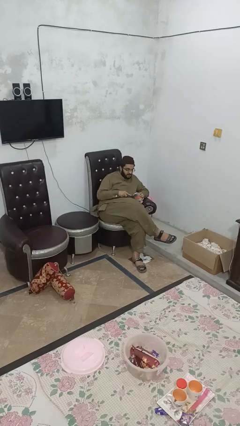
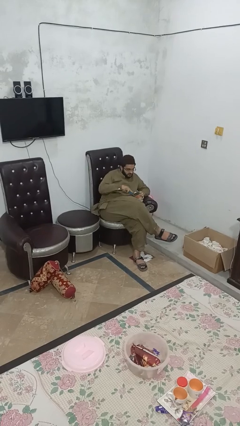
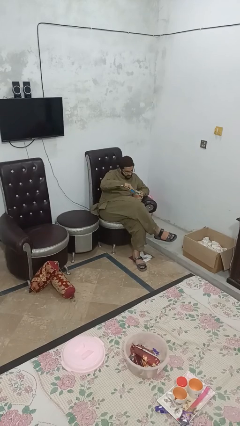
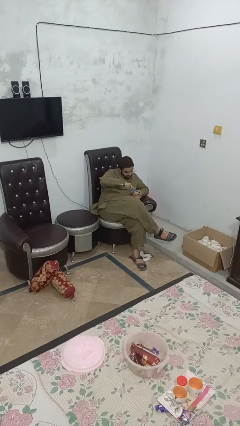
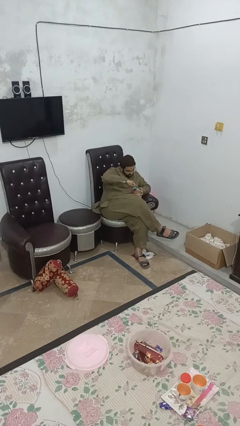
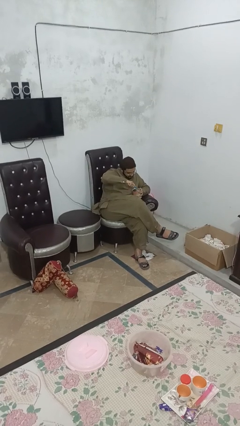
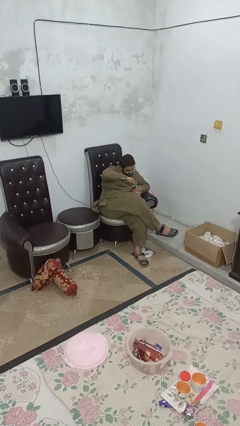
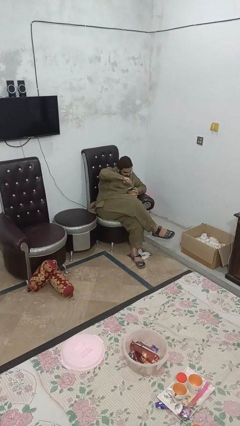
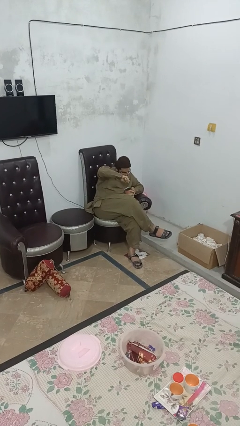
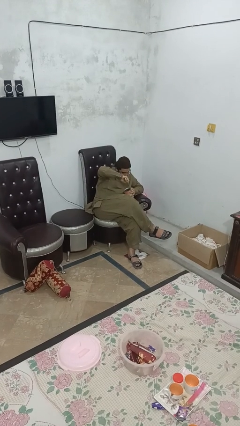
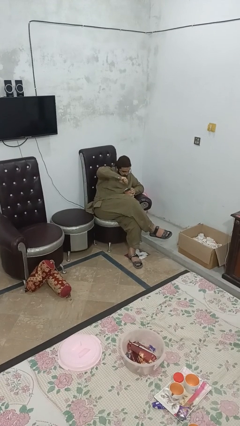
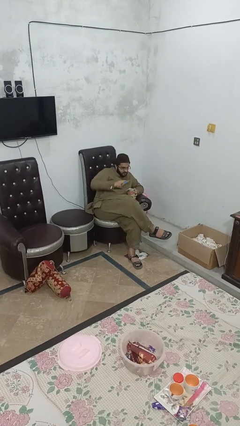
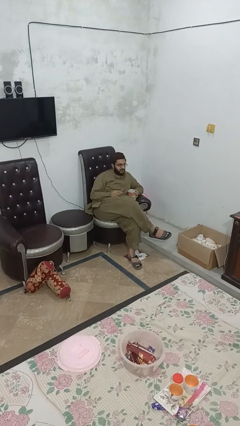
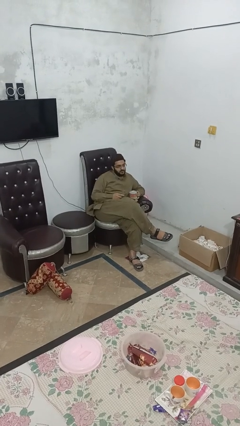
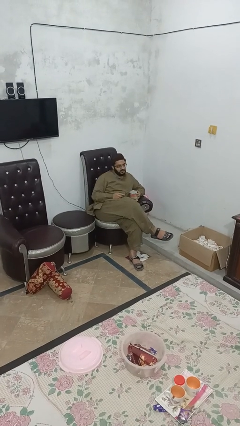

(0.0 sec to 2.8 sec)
person opens can with can opener

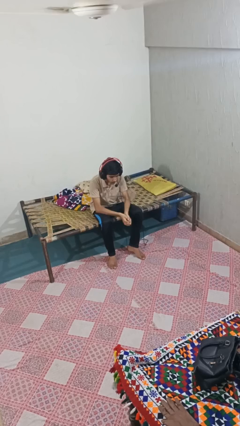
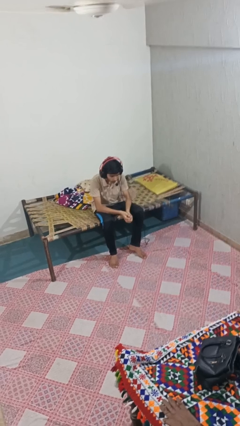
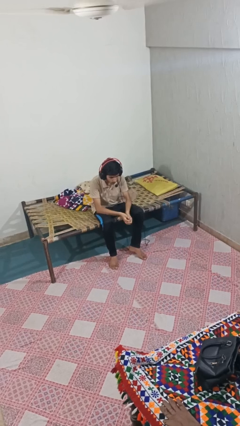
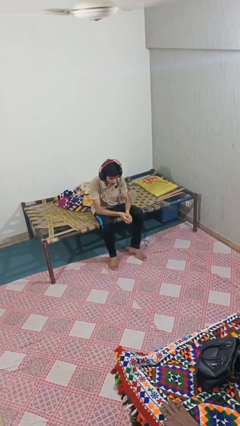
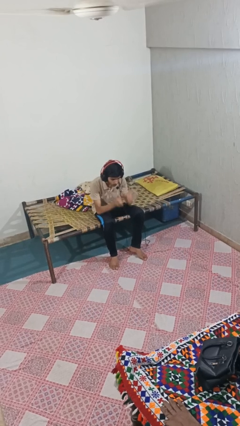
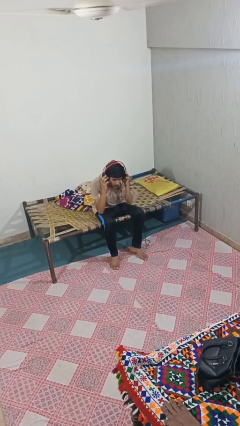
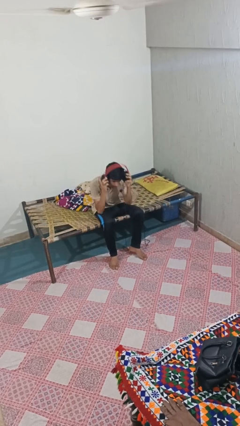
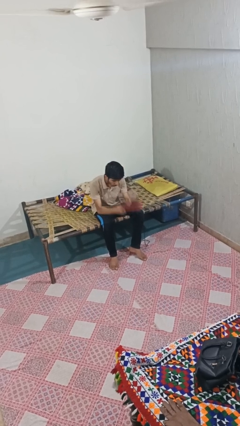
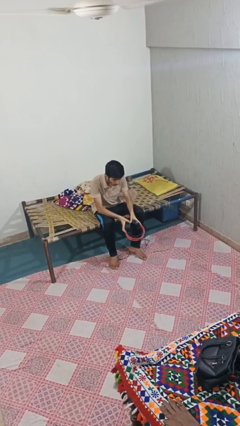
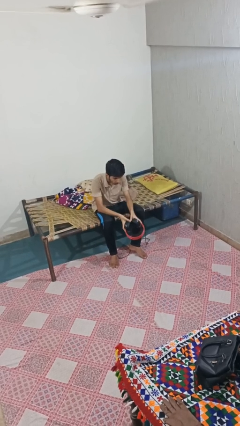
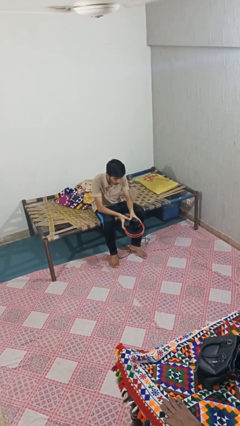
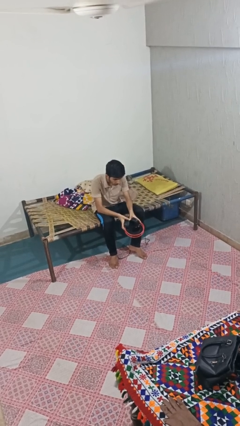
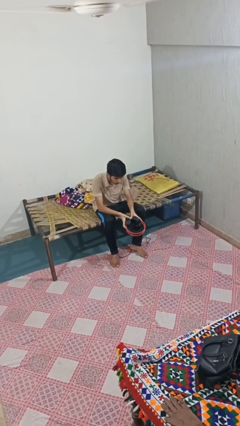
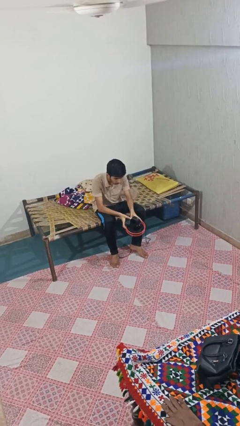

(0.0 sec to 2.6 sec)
person takes off headphones

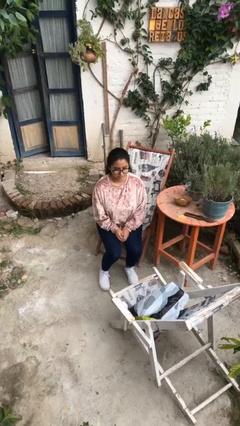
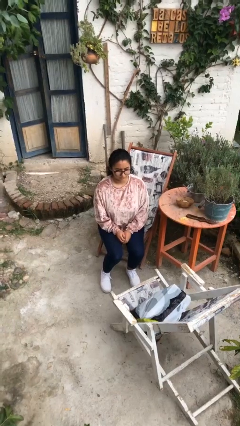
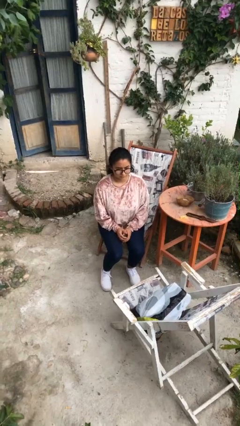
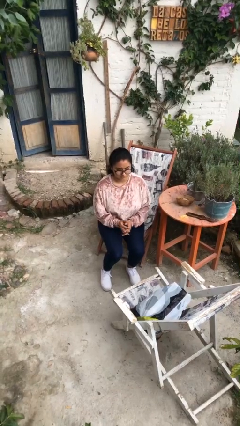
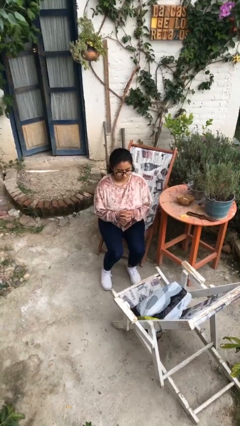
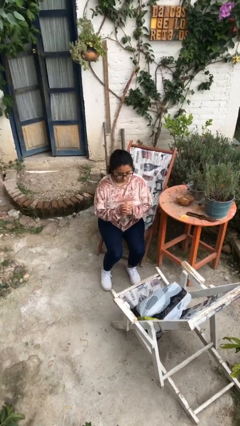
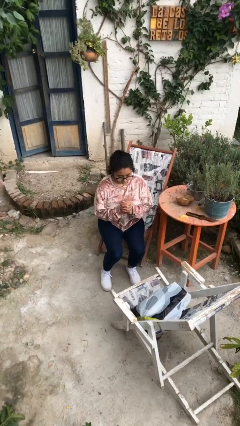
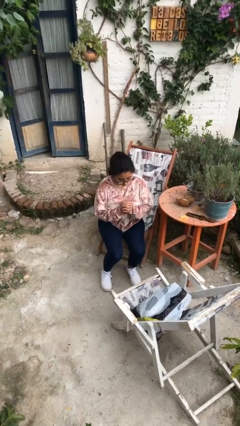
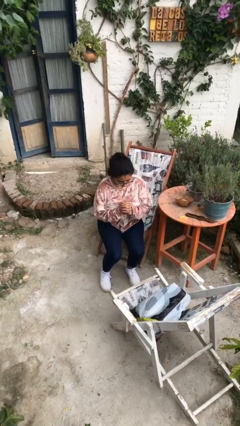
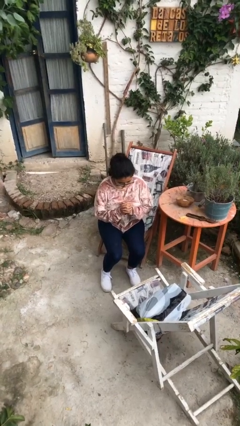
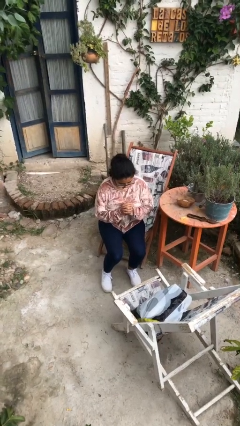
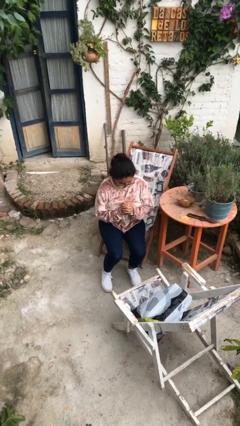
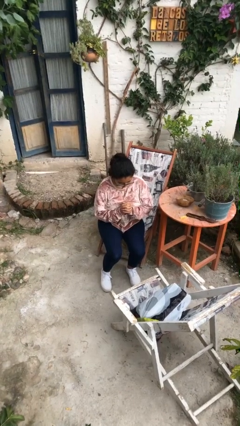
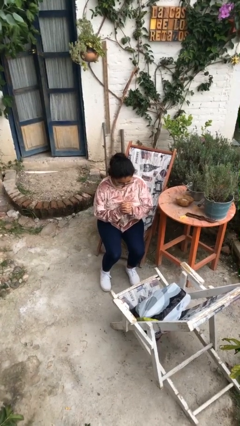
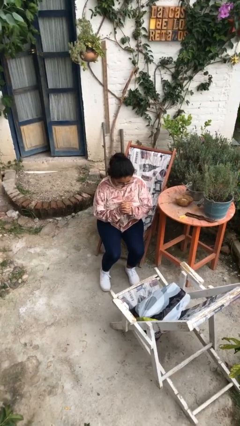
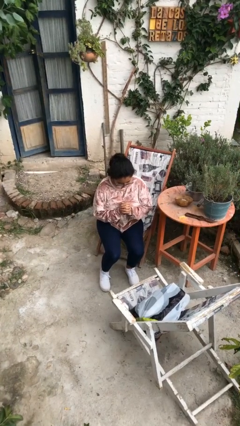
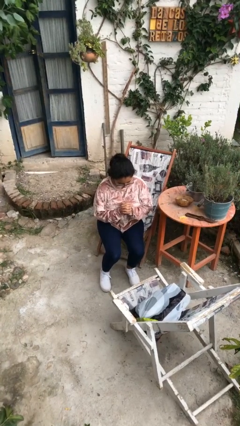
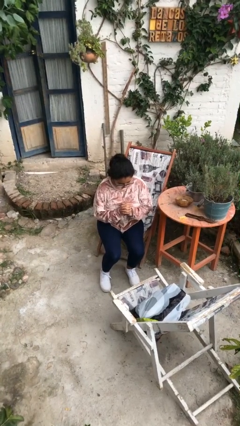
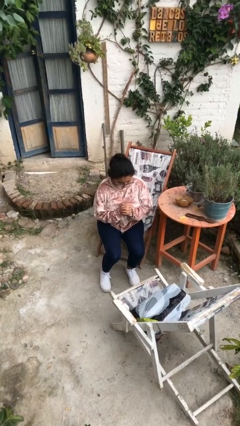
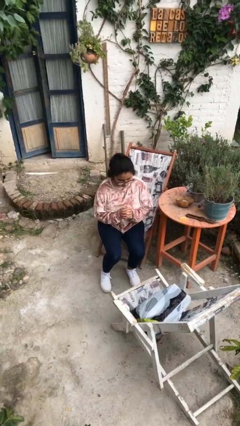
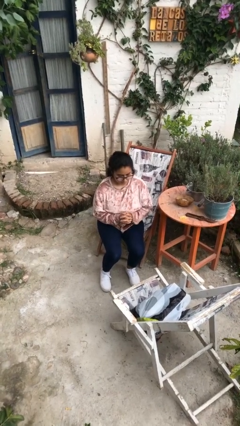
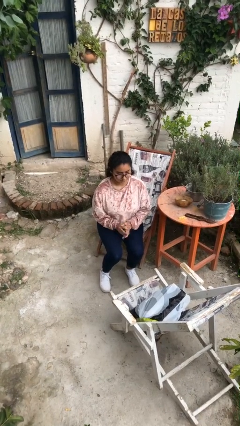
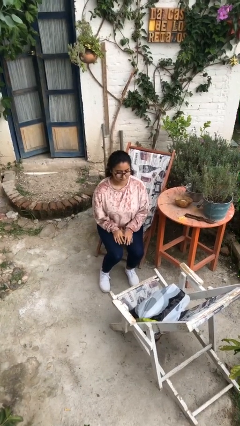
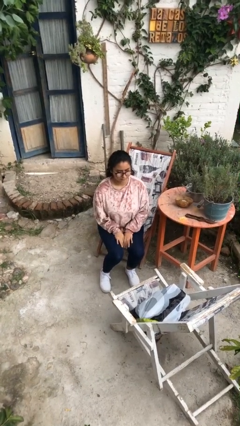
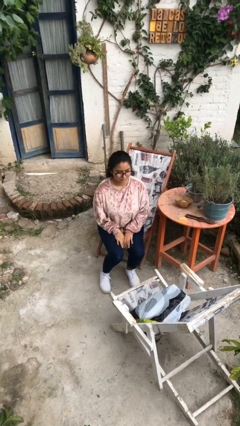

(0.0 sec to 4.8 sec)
person prays

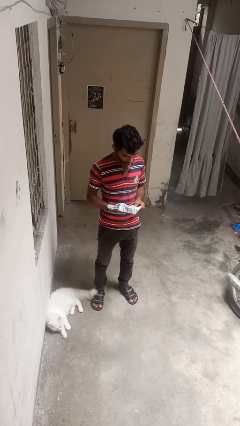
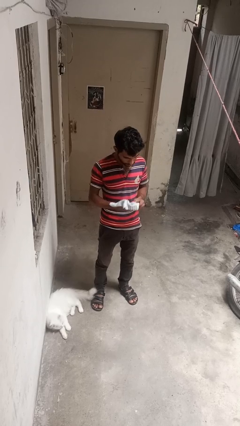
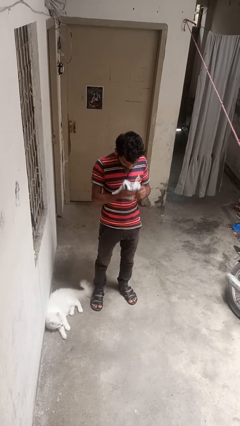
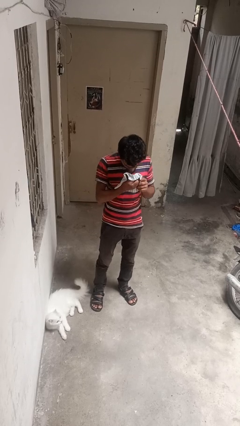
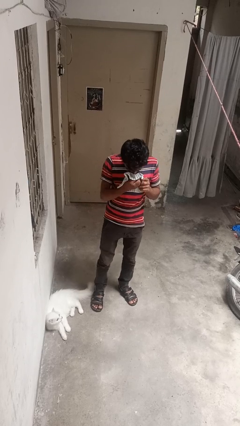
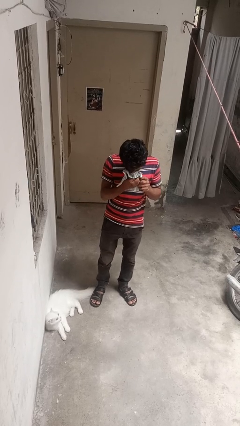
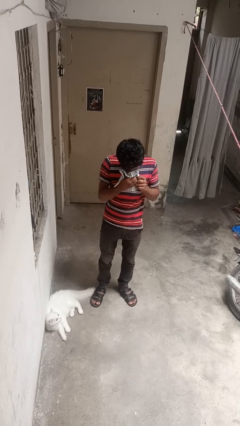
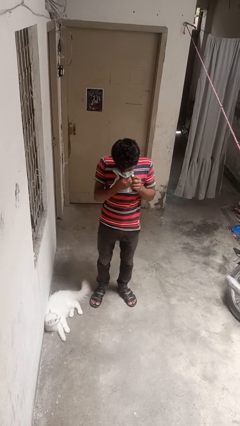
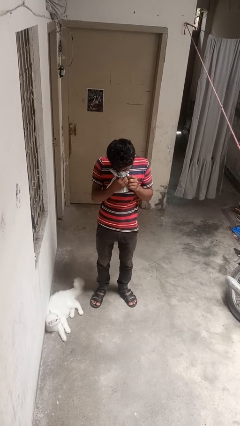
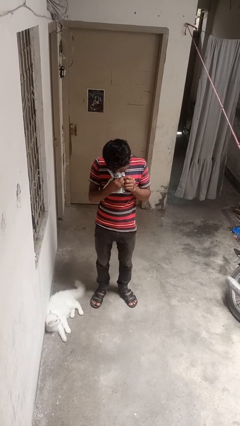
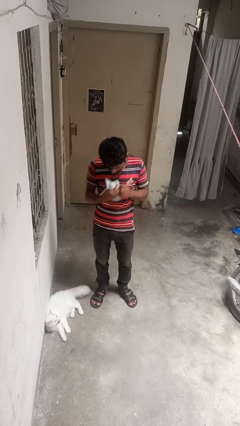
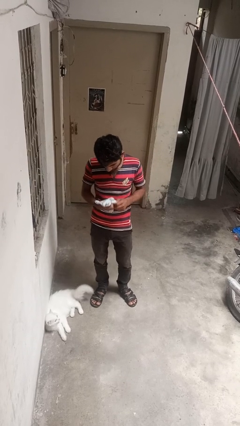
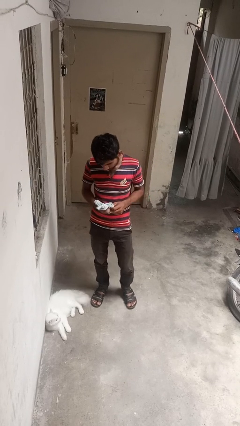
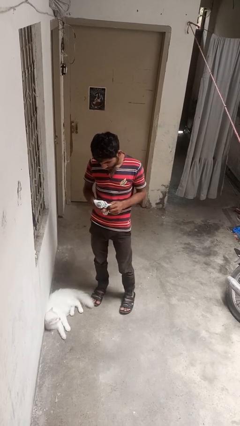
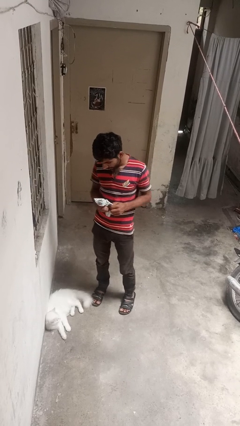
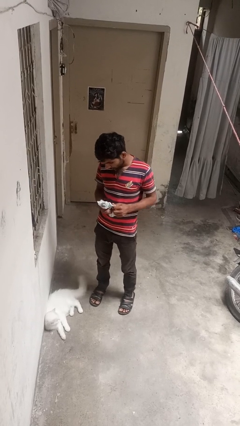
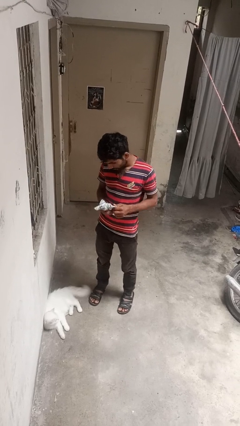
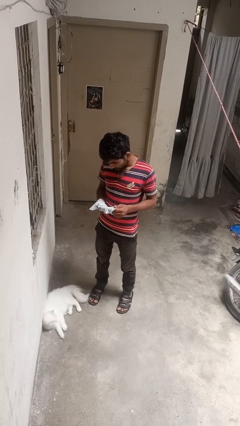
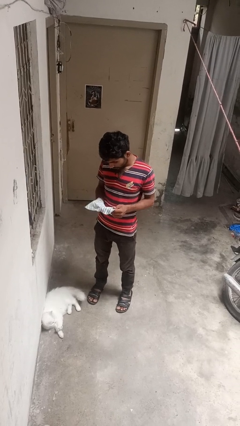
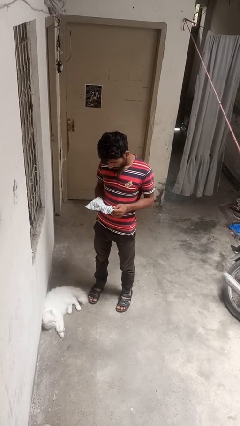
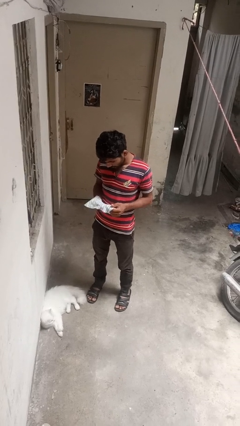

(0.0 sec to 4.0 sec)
person blows nose

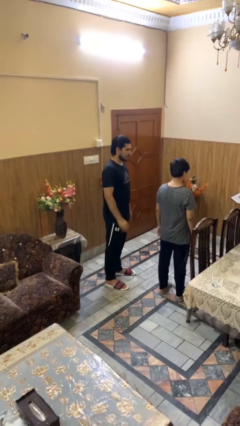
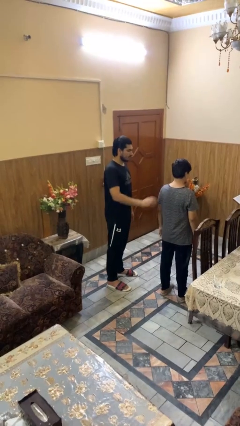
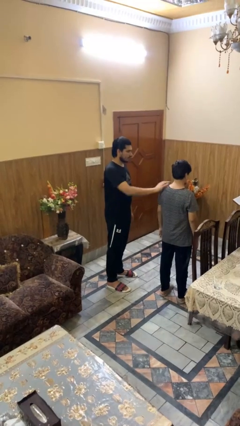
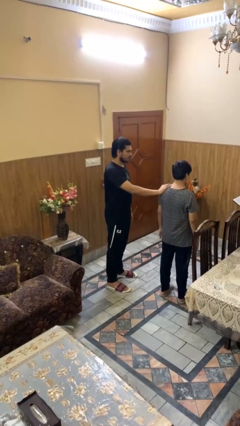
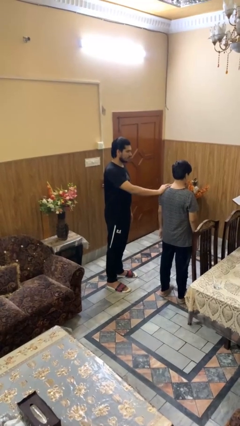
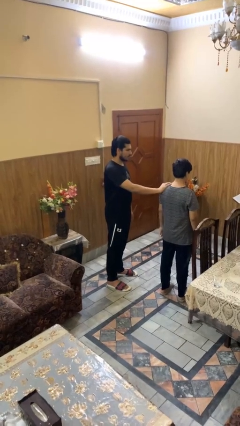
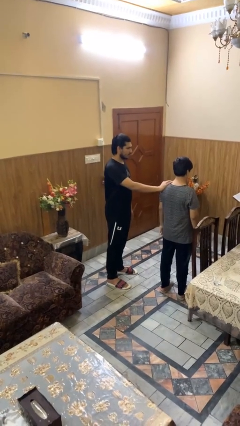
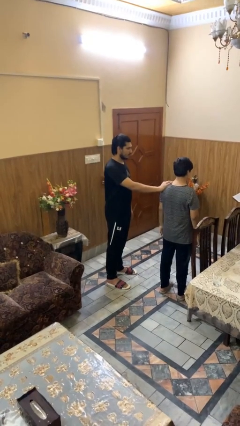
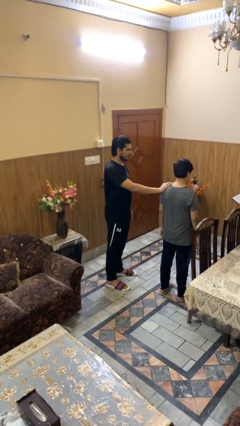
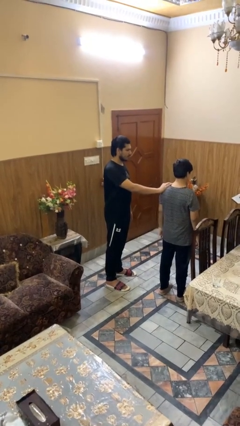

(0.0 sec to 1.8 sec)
person grabs person by shoulder

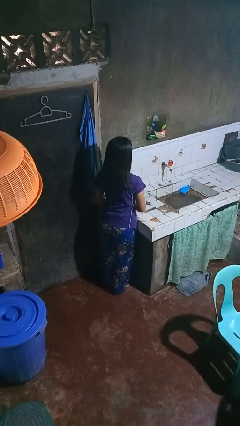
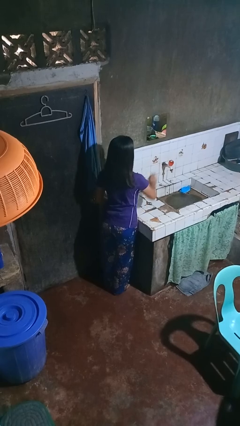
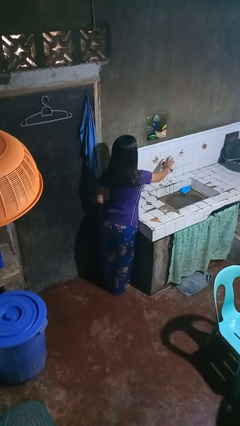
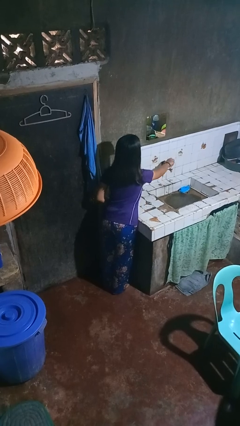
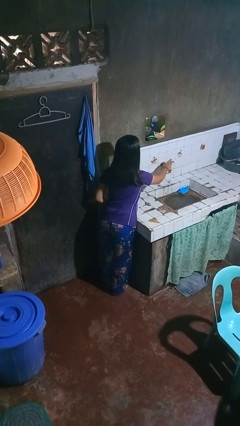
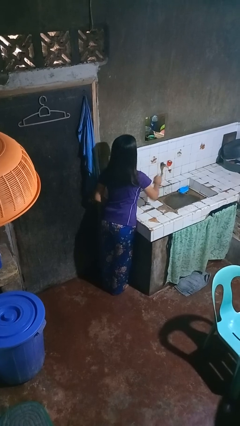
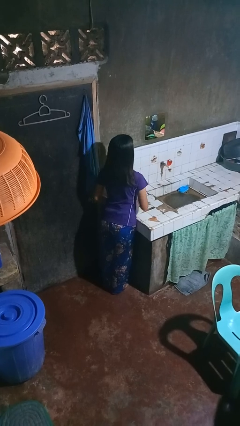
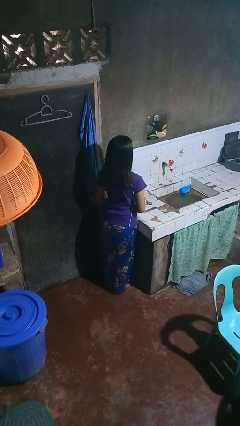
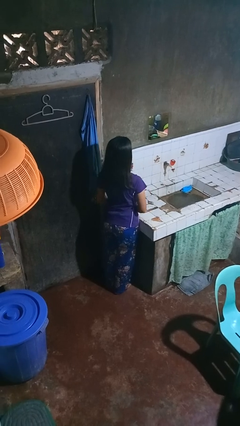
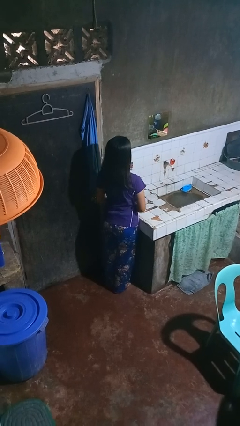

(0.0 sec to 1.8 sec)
person turns off faucet
